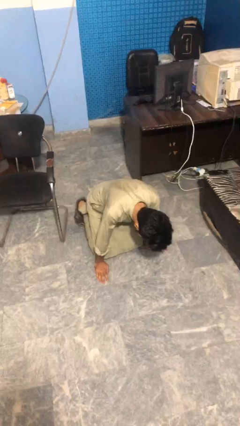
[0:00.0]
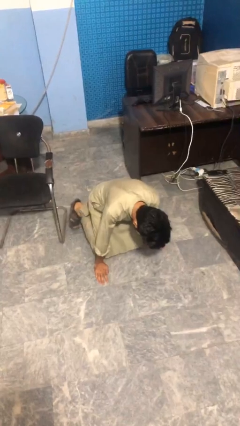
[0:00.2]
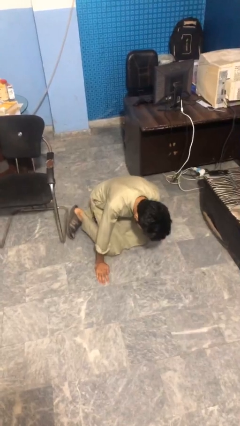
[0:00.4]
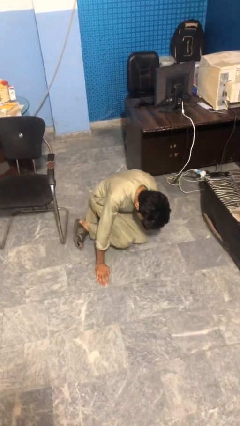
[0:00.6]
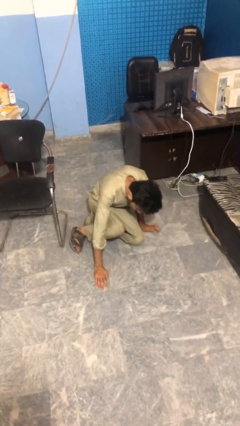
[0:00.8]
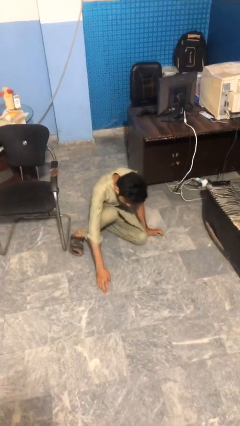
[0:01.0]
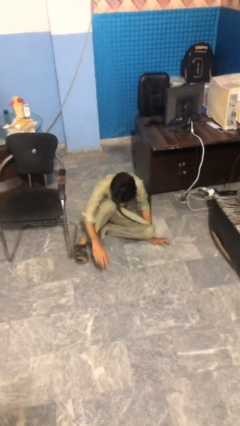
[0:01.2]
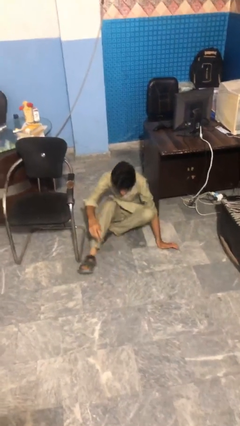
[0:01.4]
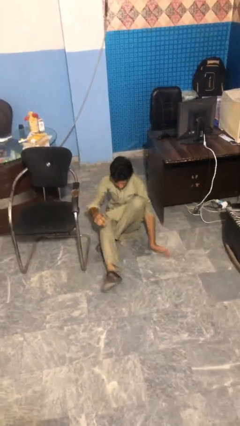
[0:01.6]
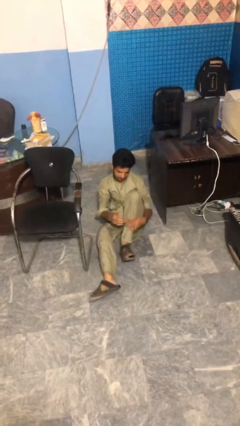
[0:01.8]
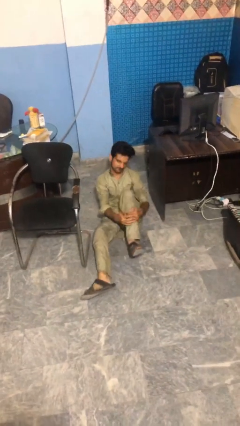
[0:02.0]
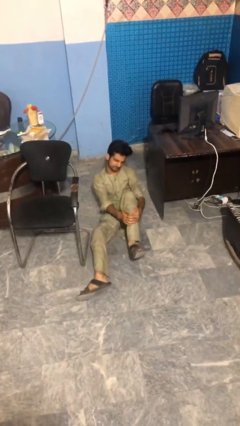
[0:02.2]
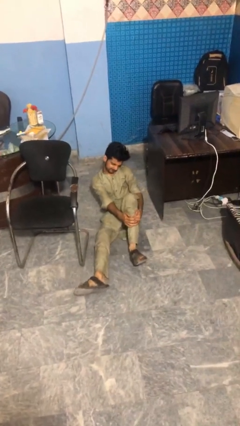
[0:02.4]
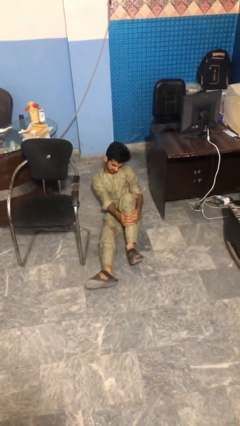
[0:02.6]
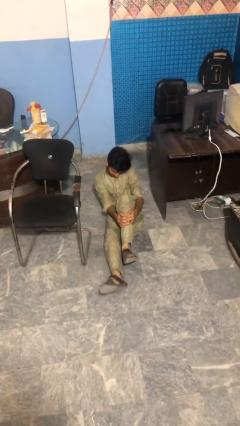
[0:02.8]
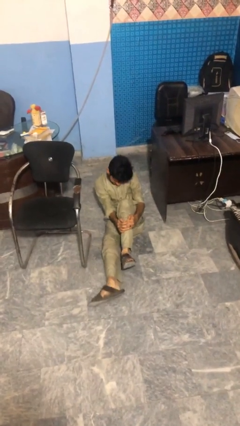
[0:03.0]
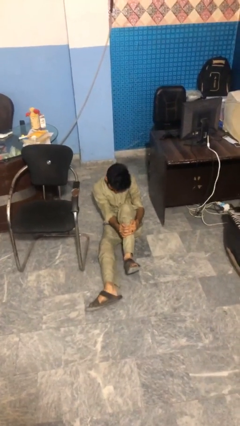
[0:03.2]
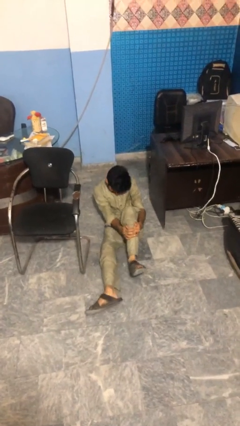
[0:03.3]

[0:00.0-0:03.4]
person lies down on floor

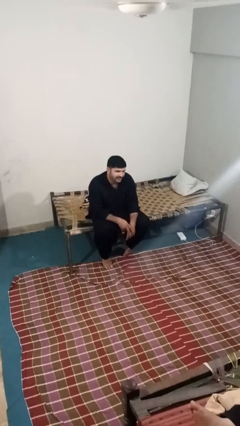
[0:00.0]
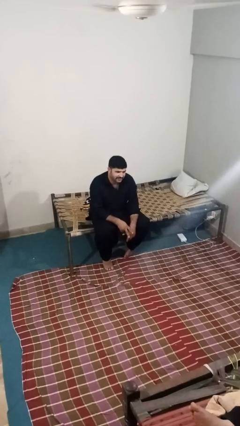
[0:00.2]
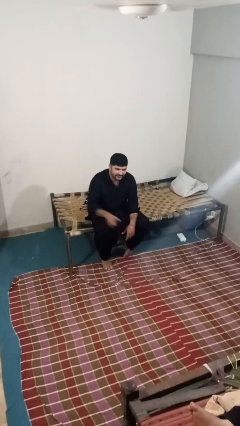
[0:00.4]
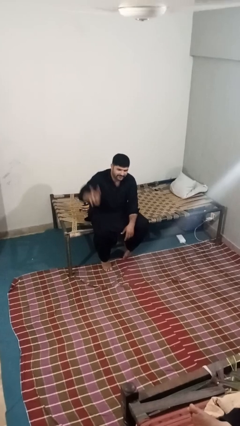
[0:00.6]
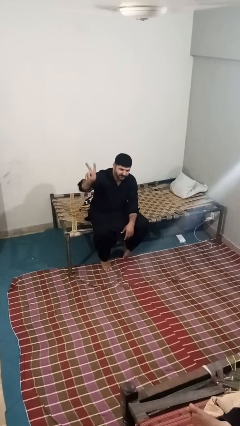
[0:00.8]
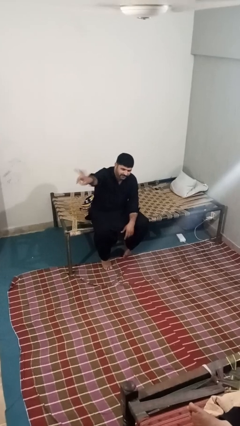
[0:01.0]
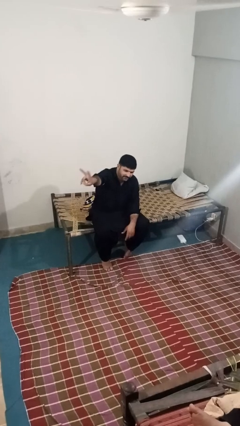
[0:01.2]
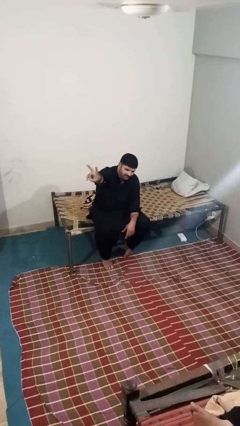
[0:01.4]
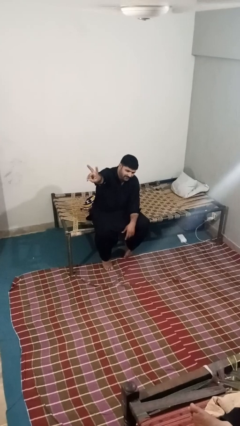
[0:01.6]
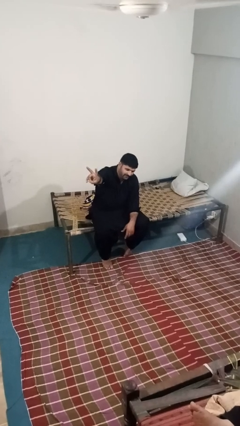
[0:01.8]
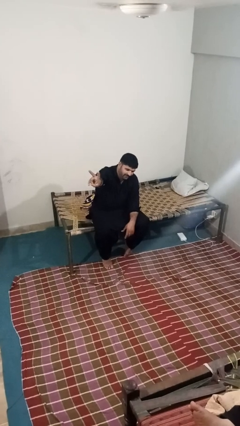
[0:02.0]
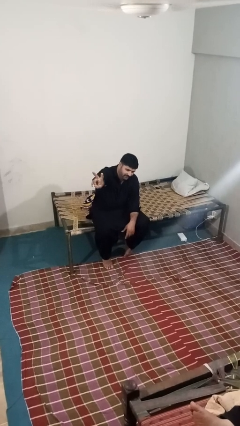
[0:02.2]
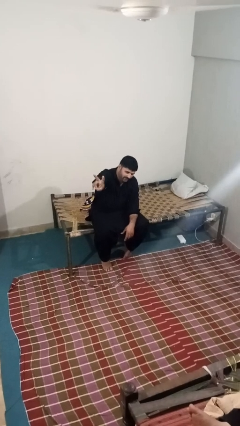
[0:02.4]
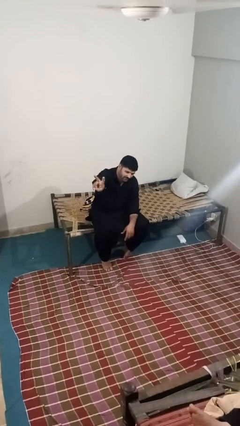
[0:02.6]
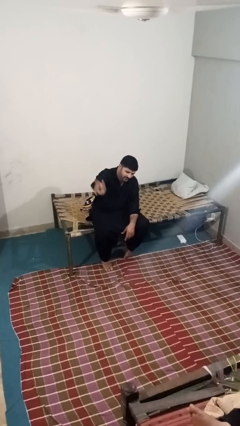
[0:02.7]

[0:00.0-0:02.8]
person gestures peace

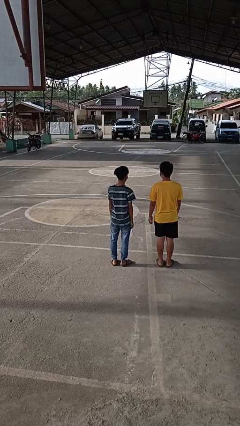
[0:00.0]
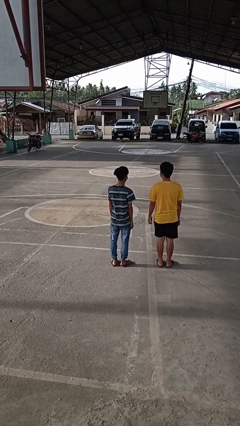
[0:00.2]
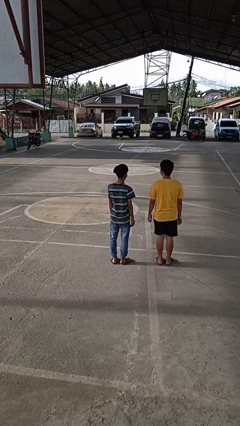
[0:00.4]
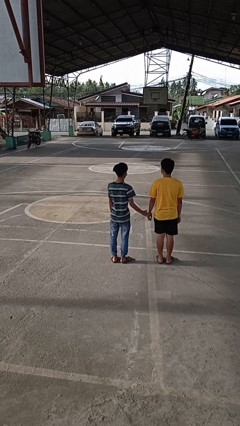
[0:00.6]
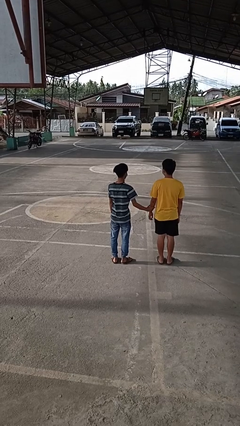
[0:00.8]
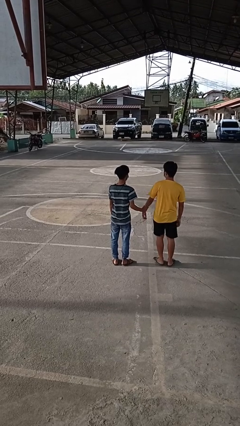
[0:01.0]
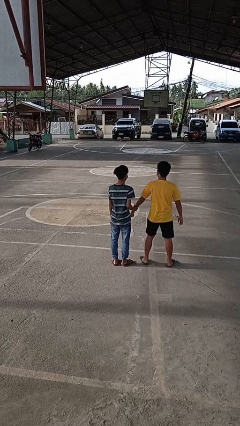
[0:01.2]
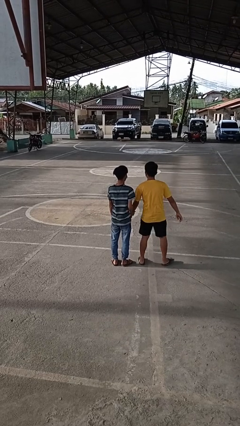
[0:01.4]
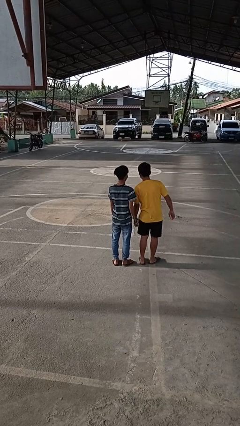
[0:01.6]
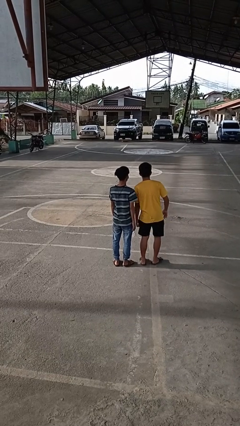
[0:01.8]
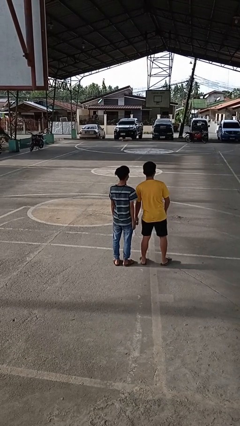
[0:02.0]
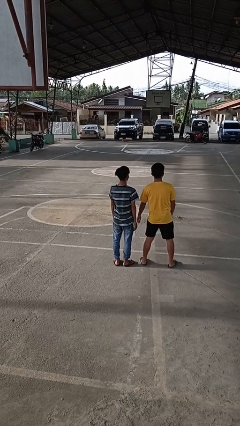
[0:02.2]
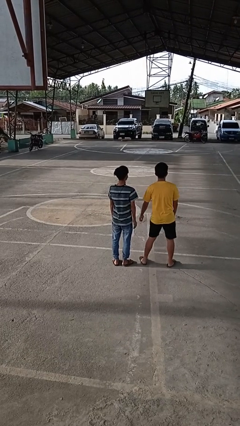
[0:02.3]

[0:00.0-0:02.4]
person grabs person by forearm

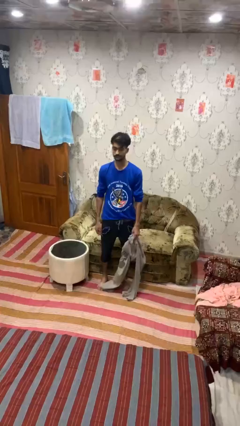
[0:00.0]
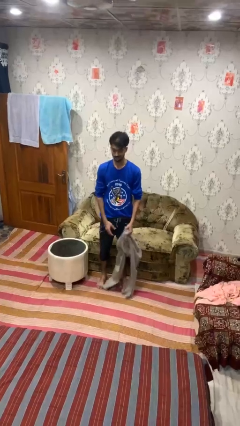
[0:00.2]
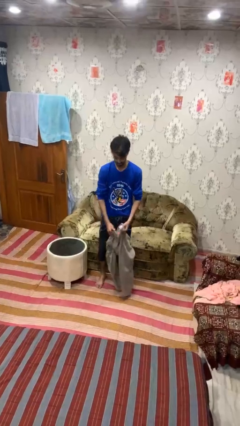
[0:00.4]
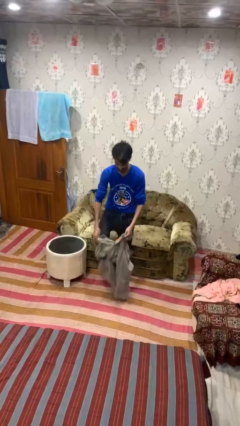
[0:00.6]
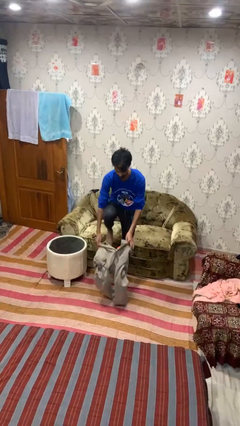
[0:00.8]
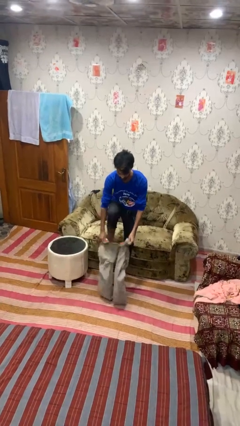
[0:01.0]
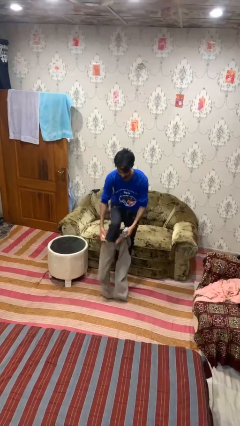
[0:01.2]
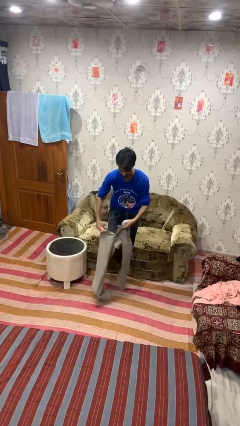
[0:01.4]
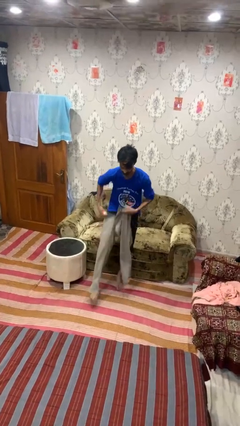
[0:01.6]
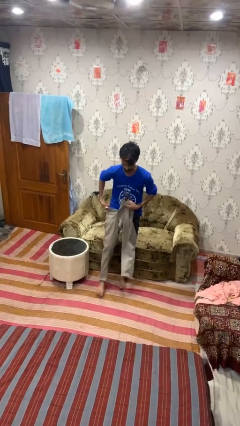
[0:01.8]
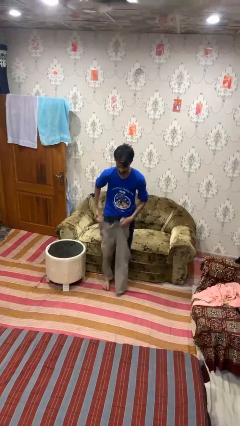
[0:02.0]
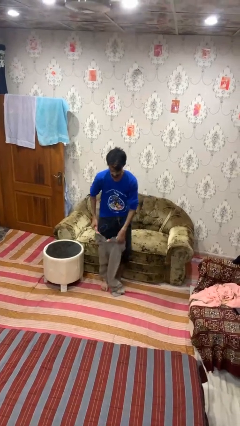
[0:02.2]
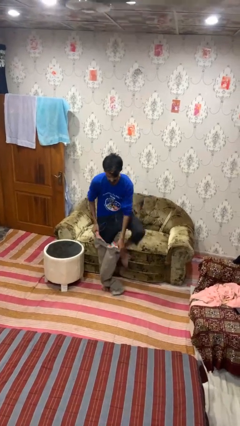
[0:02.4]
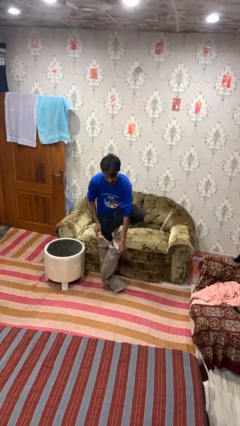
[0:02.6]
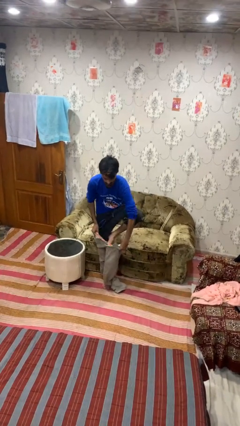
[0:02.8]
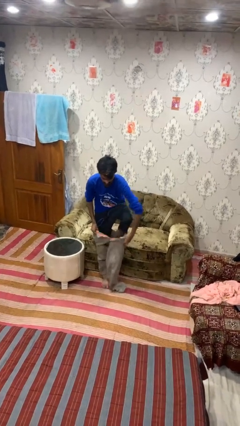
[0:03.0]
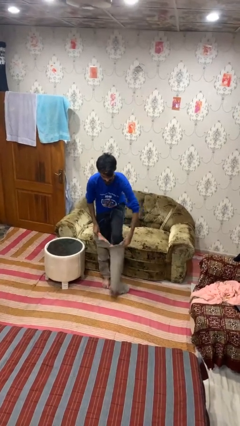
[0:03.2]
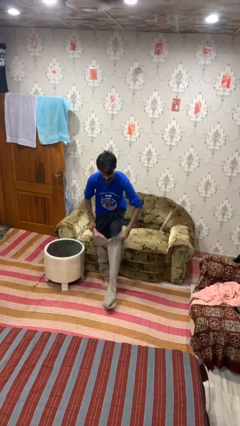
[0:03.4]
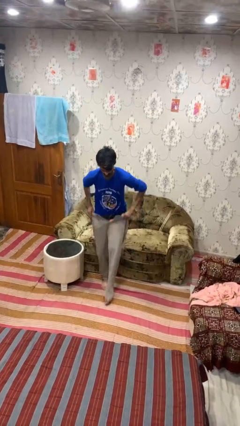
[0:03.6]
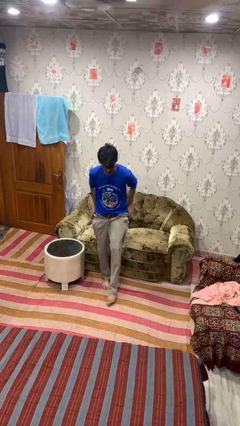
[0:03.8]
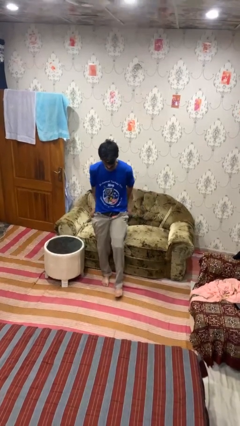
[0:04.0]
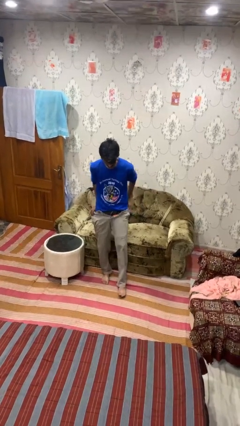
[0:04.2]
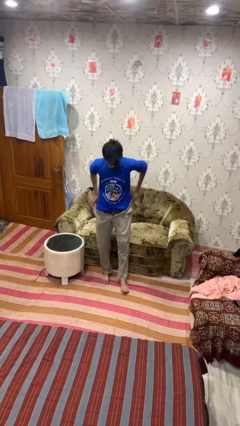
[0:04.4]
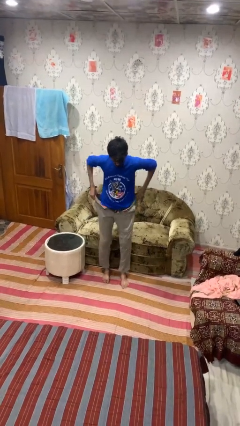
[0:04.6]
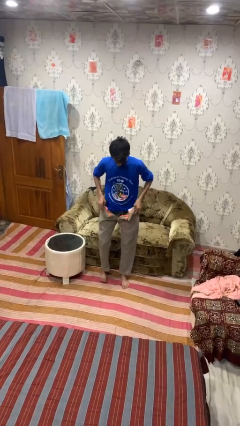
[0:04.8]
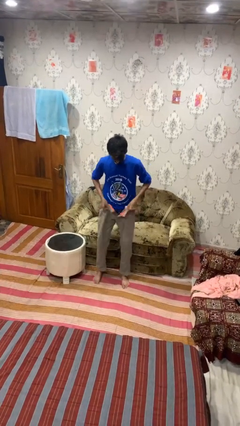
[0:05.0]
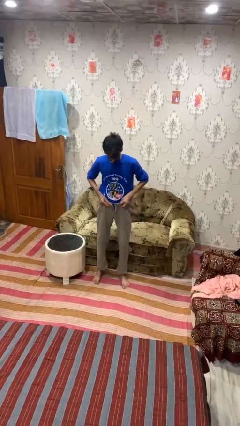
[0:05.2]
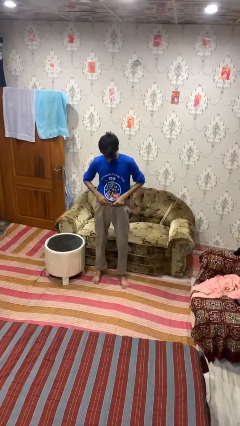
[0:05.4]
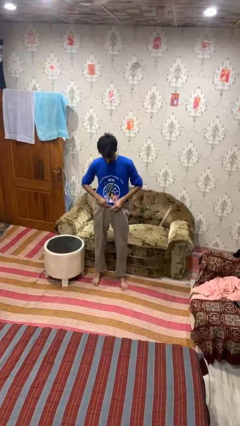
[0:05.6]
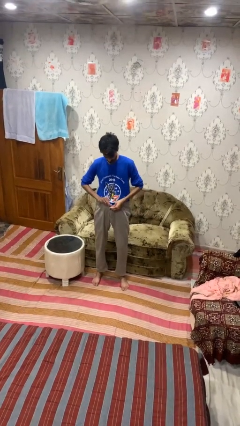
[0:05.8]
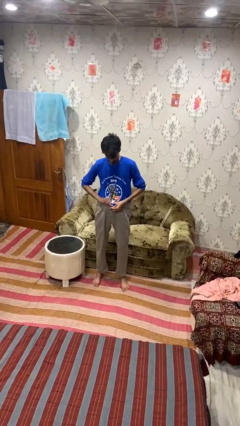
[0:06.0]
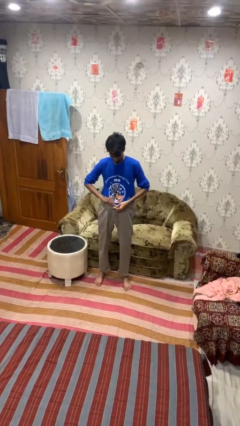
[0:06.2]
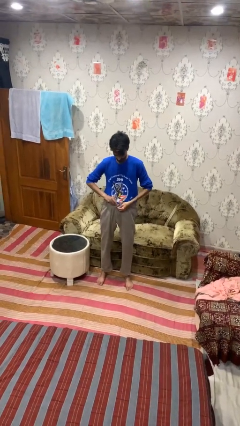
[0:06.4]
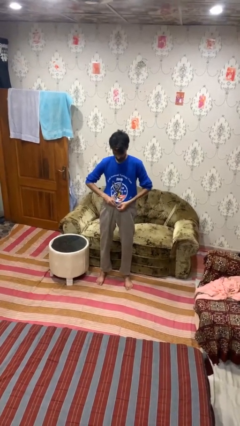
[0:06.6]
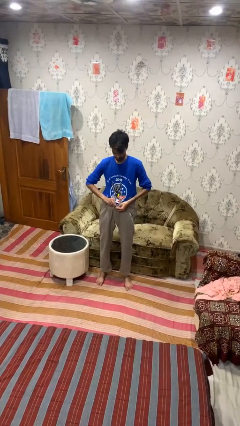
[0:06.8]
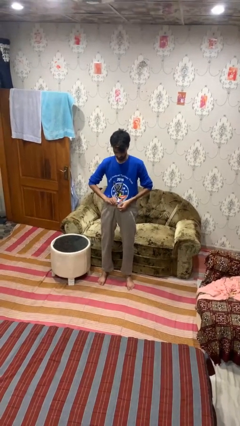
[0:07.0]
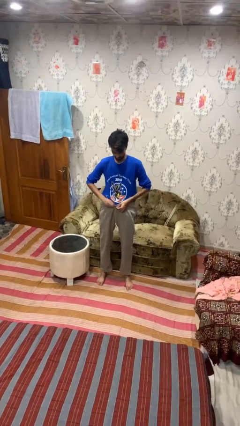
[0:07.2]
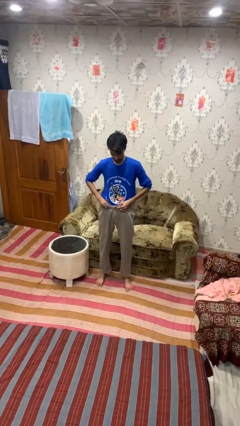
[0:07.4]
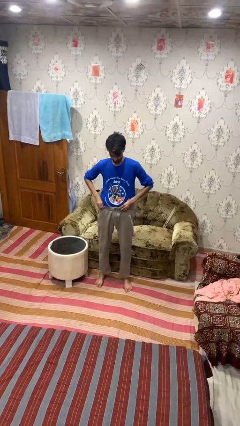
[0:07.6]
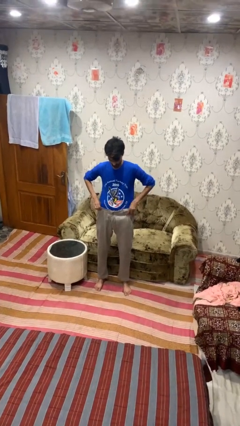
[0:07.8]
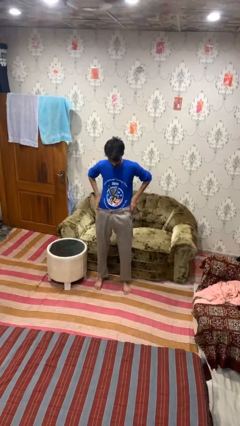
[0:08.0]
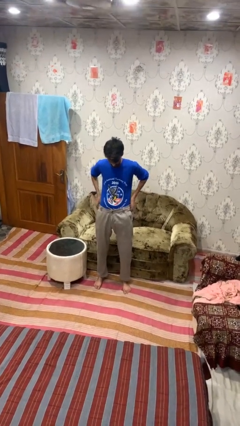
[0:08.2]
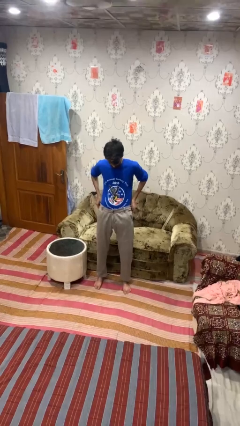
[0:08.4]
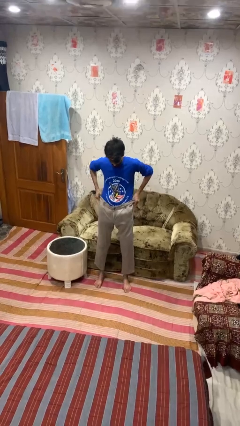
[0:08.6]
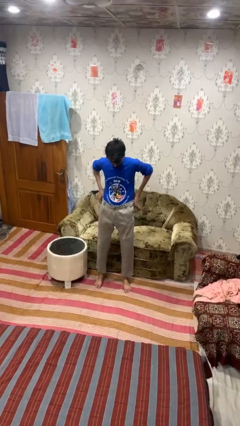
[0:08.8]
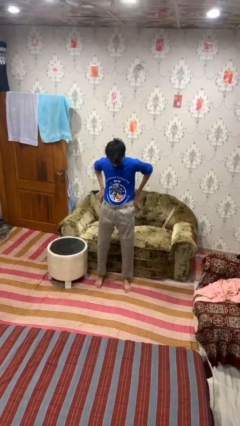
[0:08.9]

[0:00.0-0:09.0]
person puts on pants

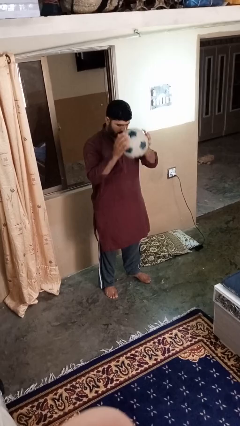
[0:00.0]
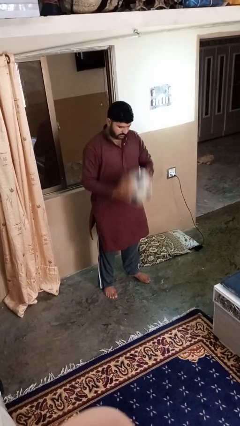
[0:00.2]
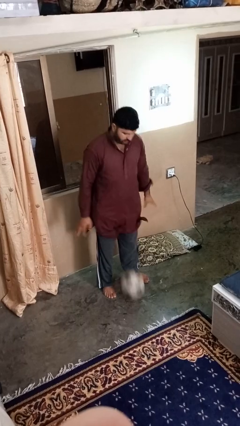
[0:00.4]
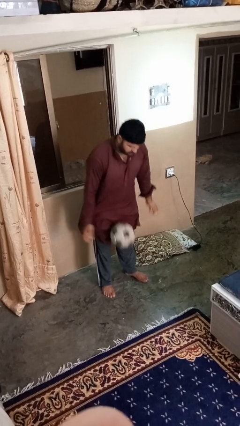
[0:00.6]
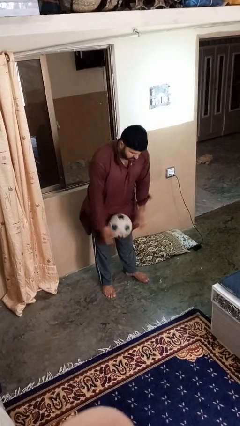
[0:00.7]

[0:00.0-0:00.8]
person bounces ball on floor
